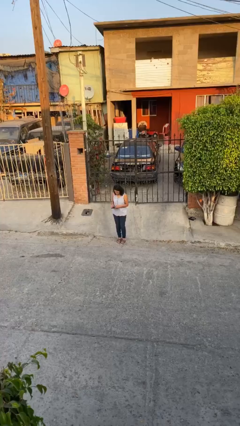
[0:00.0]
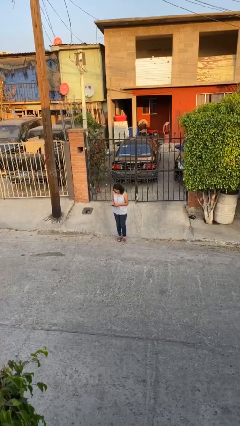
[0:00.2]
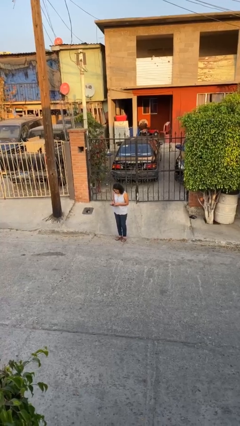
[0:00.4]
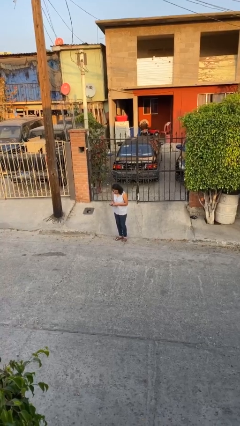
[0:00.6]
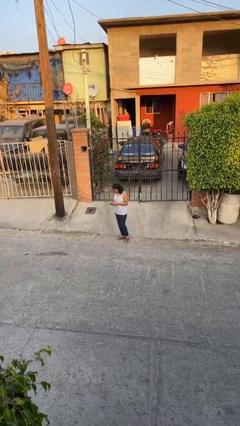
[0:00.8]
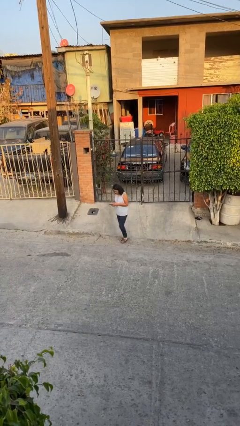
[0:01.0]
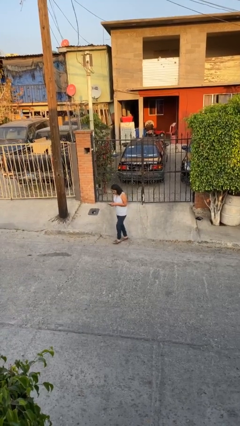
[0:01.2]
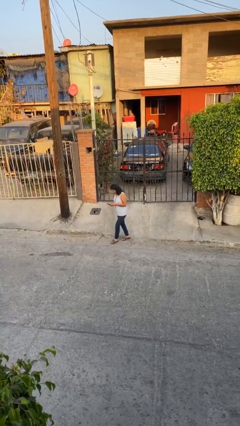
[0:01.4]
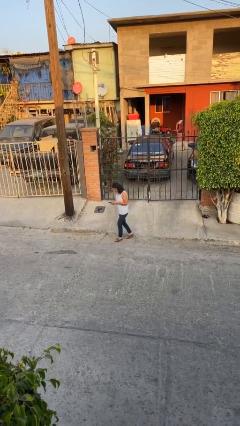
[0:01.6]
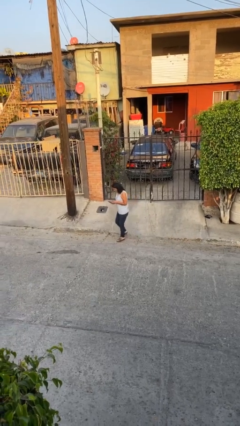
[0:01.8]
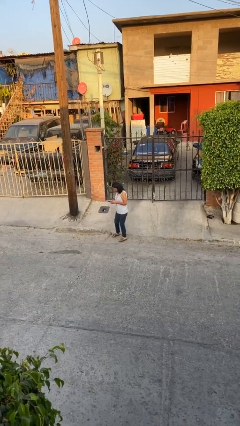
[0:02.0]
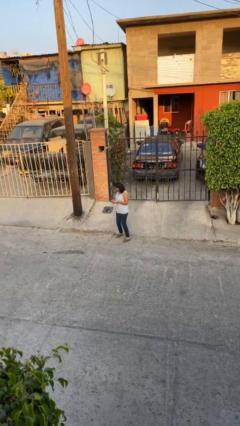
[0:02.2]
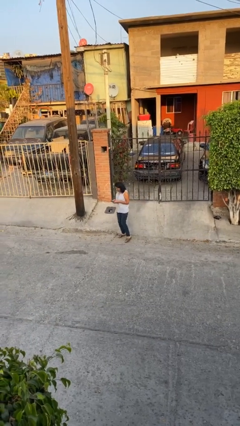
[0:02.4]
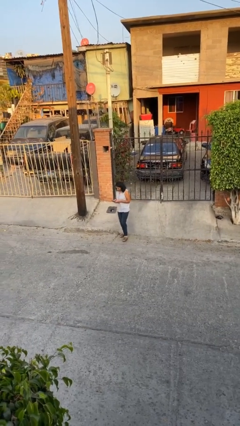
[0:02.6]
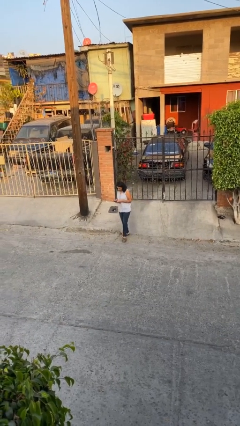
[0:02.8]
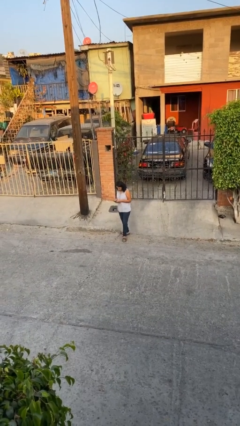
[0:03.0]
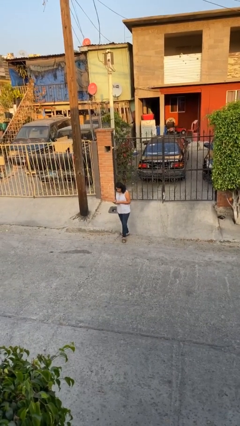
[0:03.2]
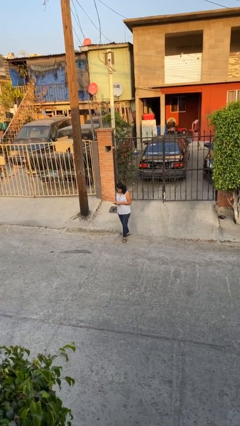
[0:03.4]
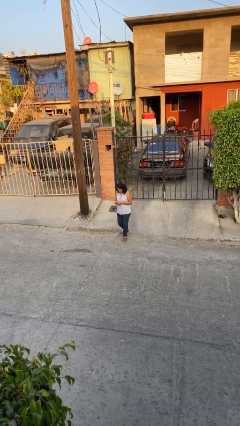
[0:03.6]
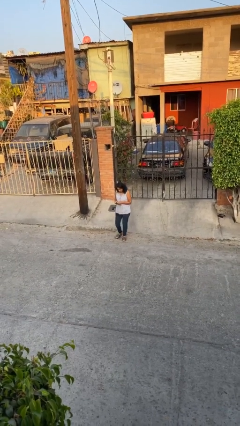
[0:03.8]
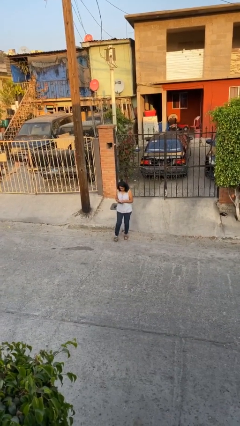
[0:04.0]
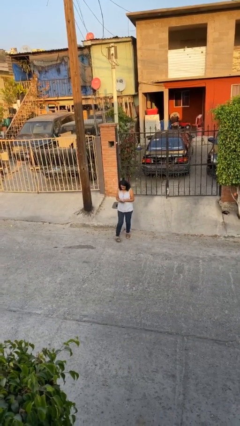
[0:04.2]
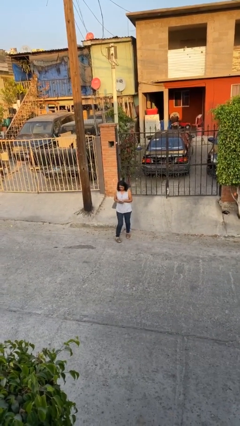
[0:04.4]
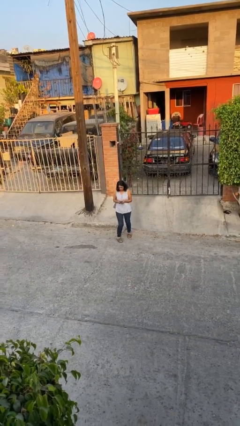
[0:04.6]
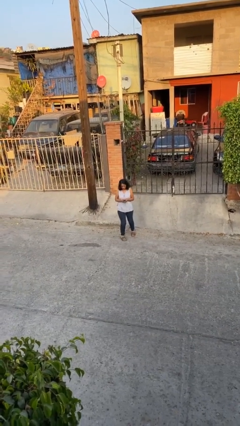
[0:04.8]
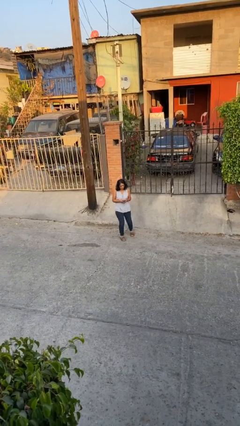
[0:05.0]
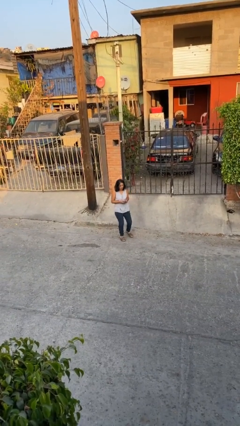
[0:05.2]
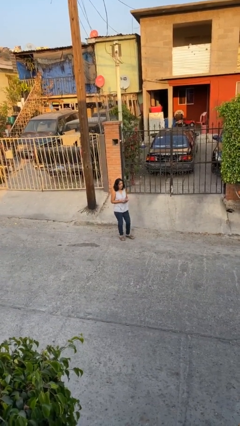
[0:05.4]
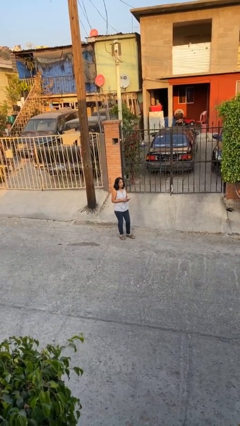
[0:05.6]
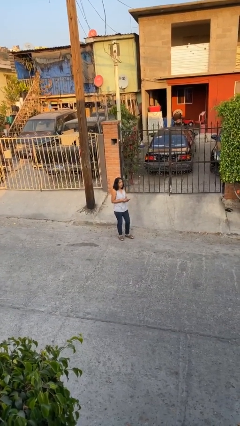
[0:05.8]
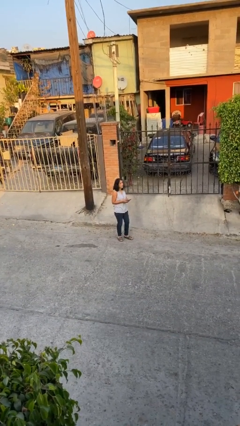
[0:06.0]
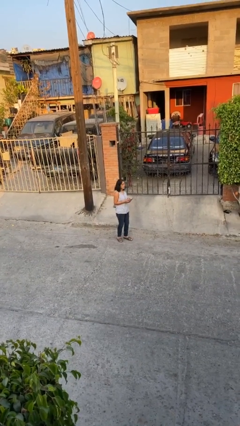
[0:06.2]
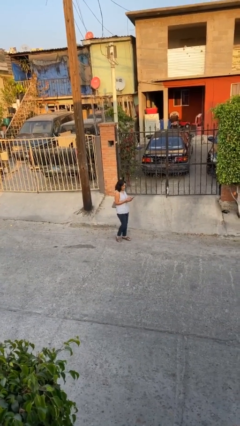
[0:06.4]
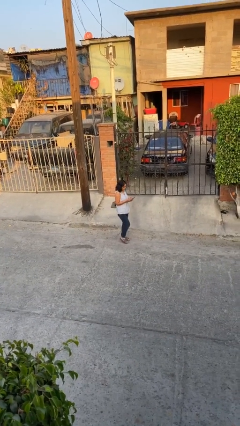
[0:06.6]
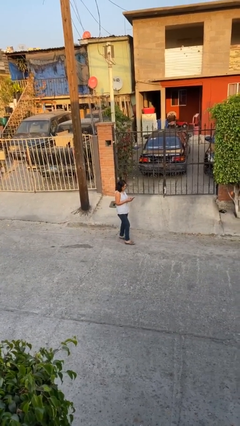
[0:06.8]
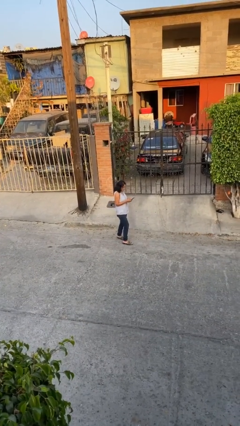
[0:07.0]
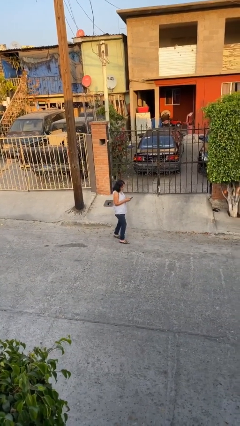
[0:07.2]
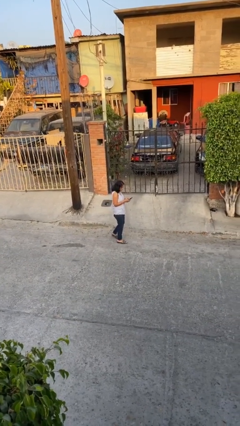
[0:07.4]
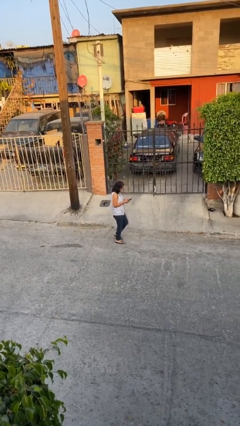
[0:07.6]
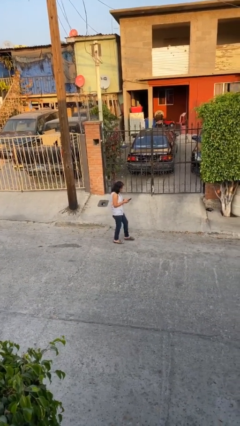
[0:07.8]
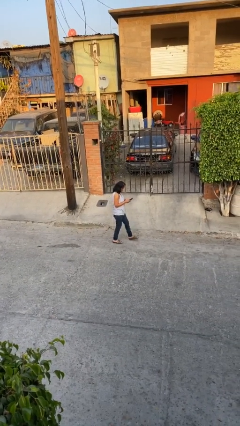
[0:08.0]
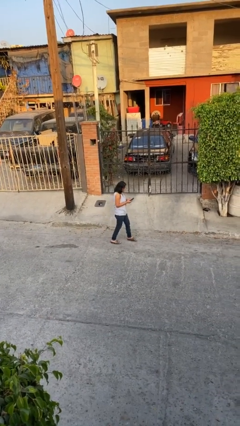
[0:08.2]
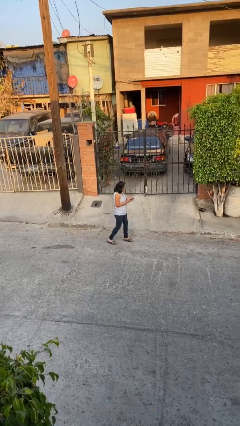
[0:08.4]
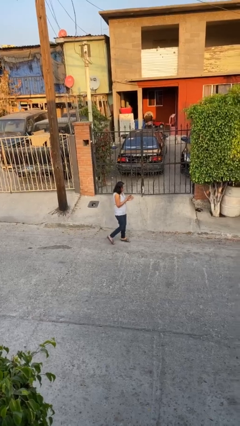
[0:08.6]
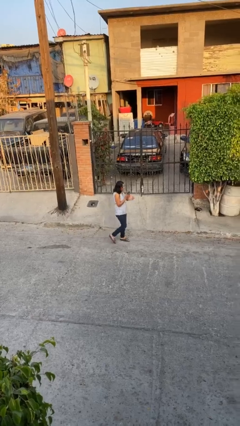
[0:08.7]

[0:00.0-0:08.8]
person texts on phone

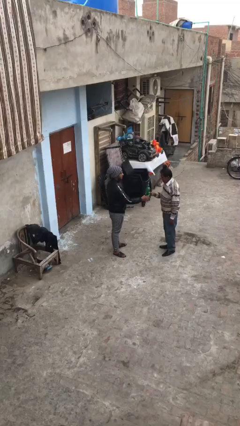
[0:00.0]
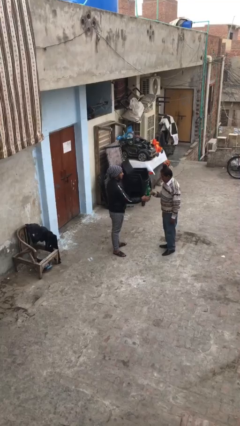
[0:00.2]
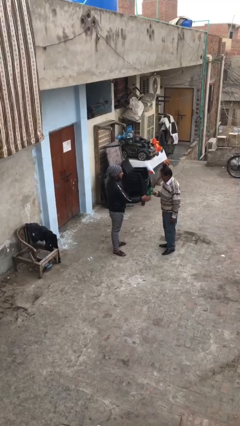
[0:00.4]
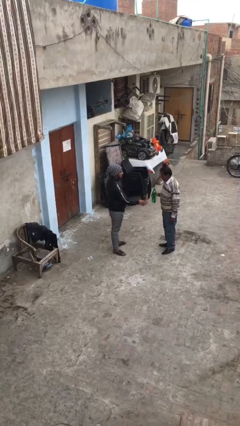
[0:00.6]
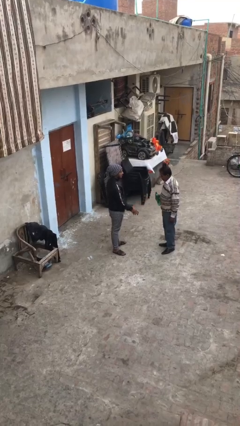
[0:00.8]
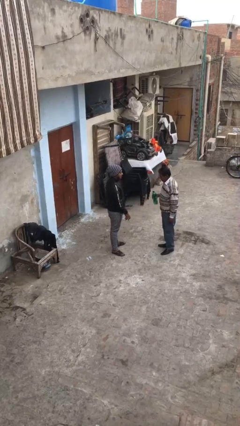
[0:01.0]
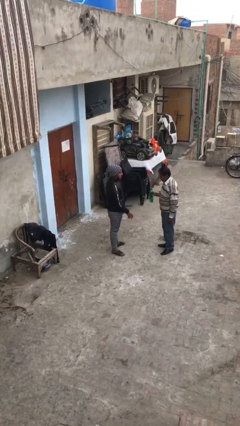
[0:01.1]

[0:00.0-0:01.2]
person transfers object to person

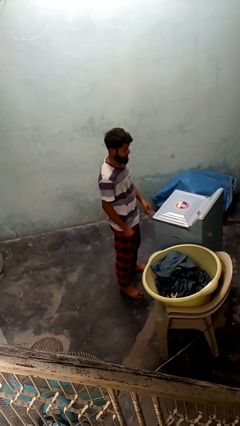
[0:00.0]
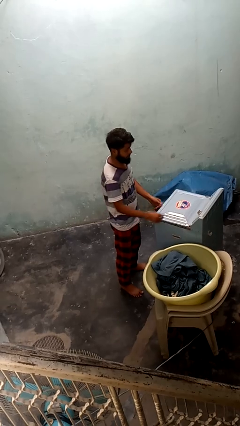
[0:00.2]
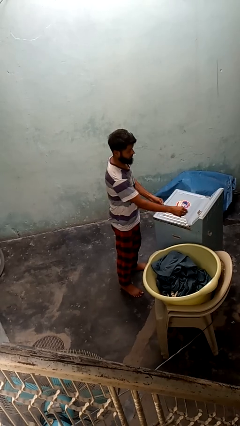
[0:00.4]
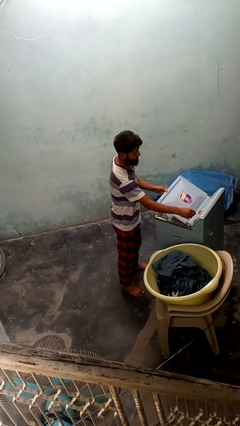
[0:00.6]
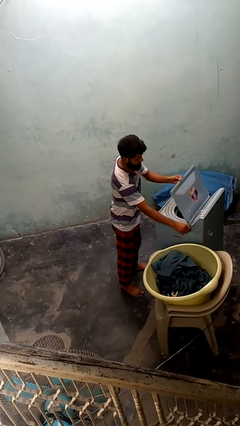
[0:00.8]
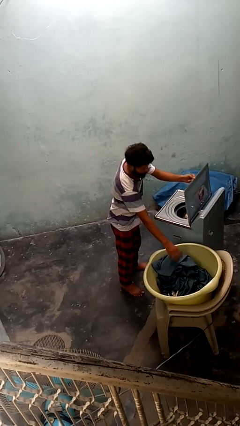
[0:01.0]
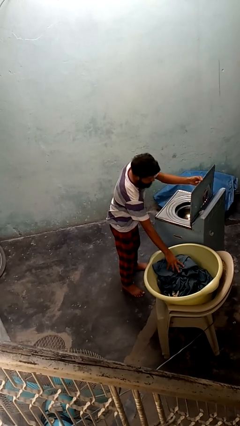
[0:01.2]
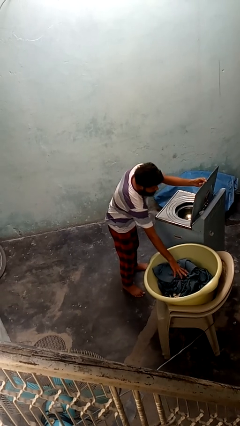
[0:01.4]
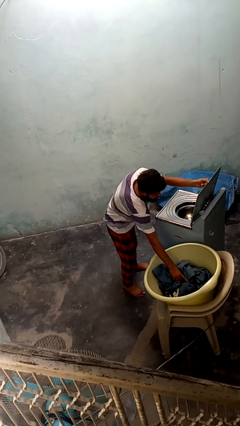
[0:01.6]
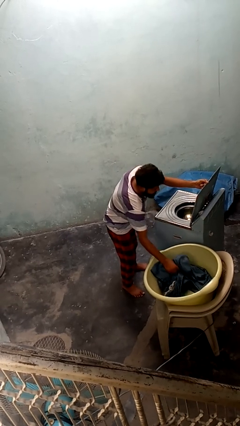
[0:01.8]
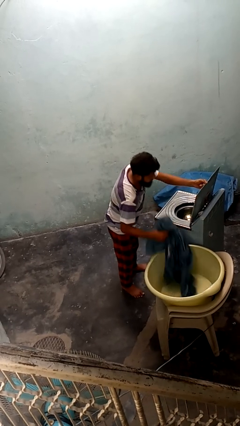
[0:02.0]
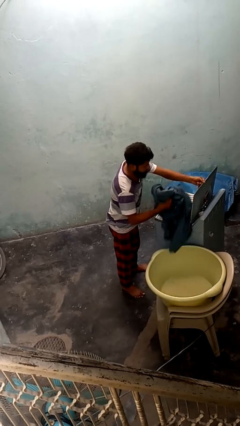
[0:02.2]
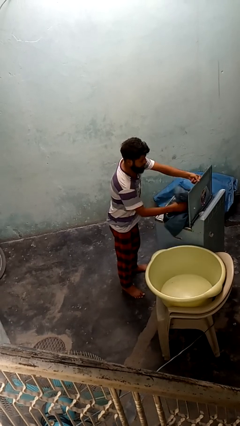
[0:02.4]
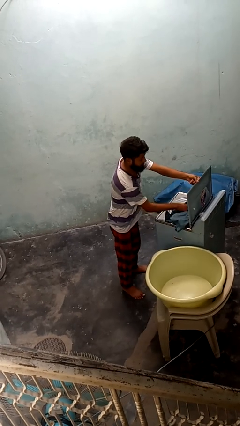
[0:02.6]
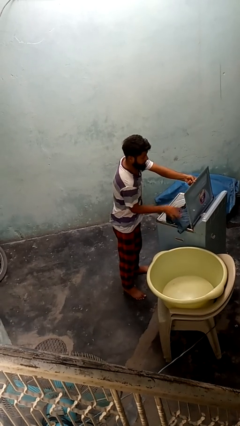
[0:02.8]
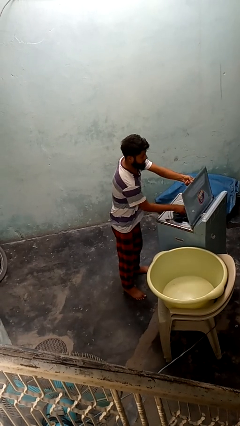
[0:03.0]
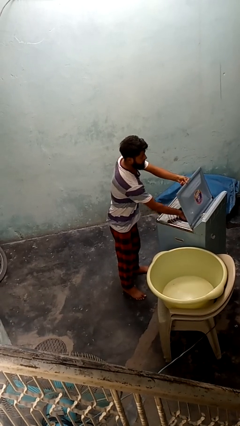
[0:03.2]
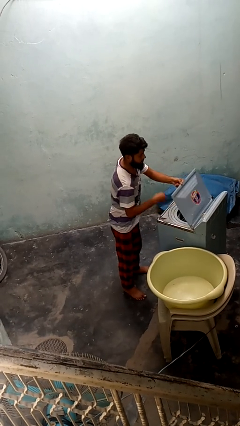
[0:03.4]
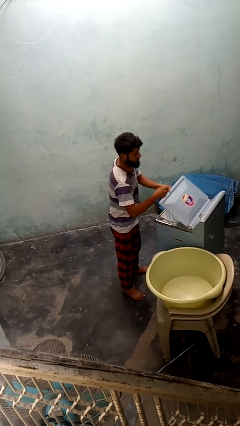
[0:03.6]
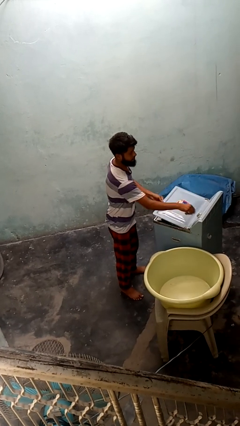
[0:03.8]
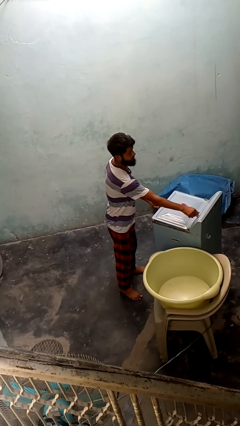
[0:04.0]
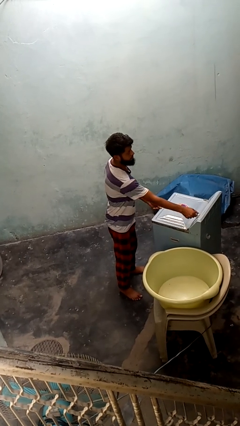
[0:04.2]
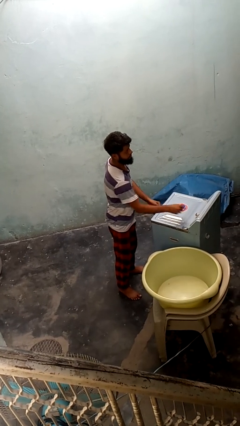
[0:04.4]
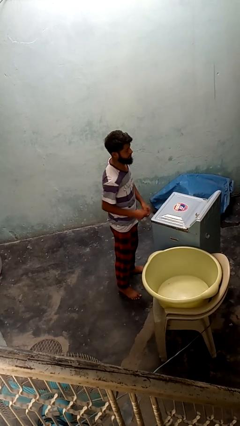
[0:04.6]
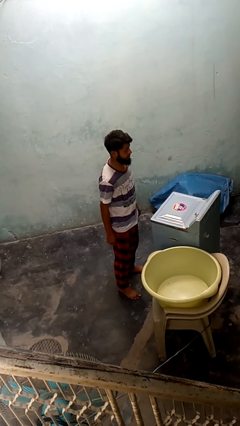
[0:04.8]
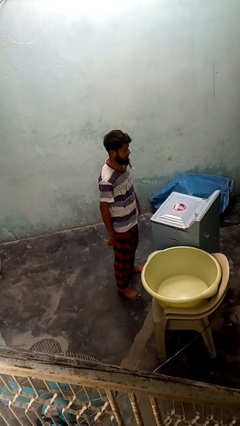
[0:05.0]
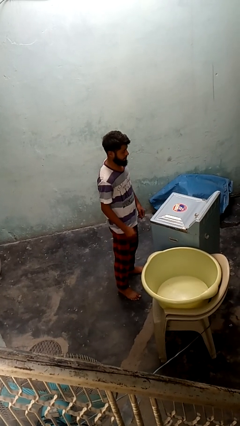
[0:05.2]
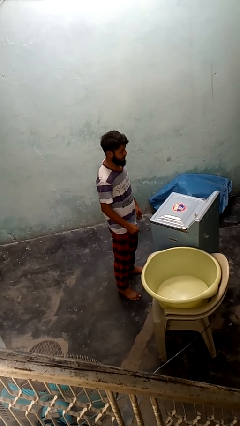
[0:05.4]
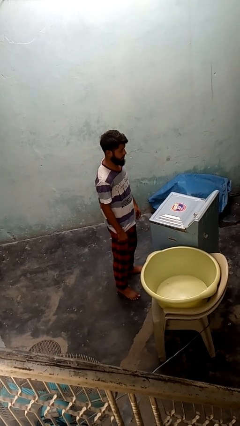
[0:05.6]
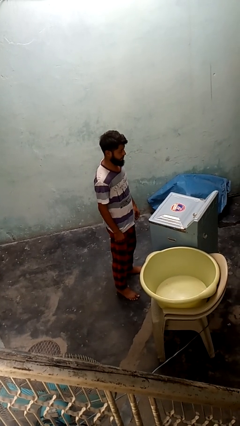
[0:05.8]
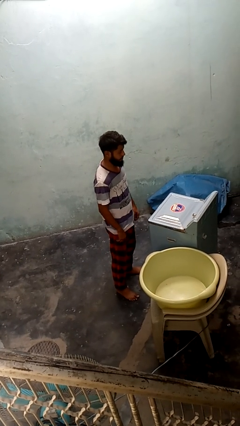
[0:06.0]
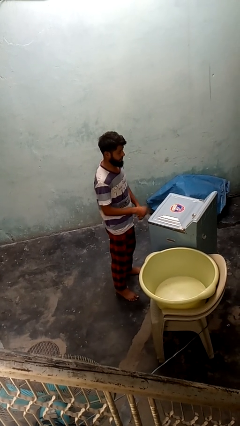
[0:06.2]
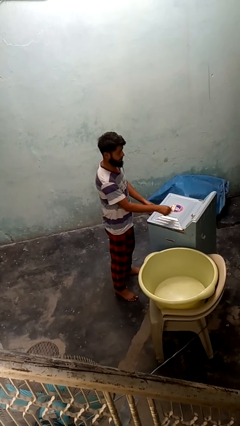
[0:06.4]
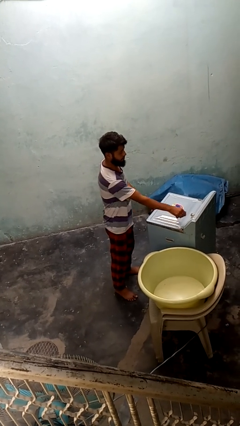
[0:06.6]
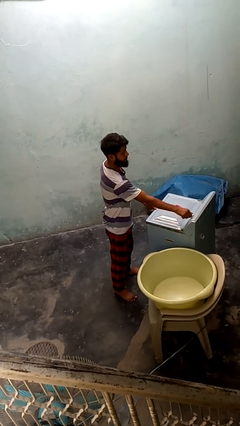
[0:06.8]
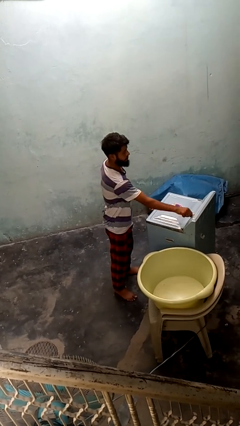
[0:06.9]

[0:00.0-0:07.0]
person loads dryer

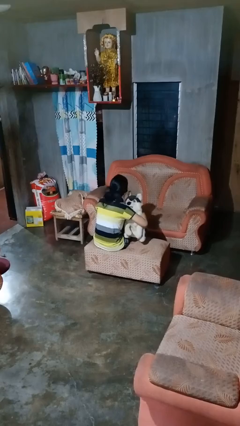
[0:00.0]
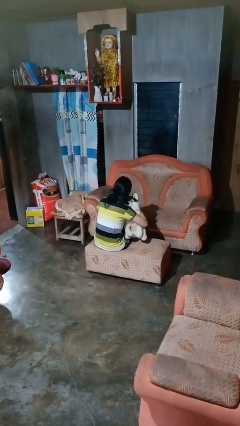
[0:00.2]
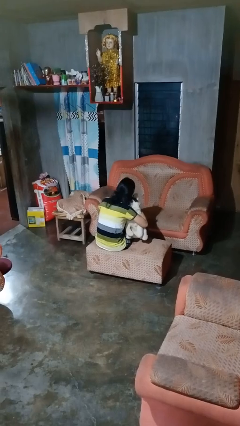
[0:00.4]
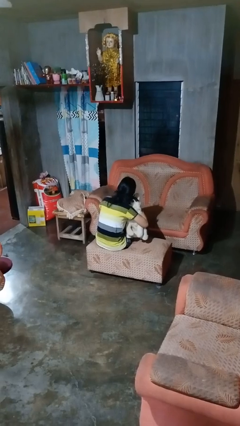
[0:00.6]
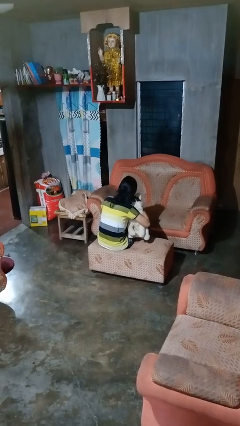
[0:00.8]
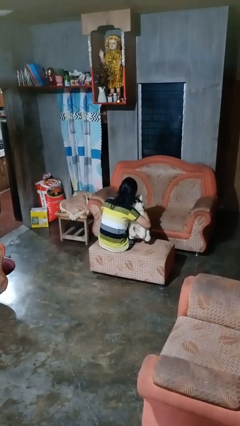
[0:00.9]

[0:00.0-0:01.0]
person hugs stuffed animal
